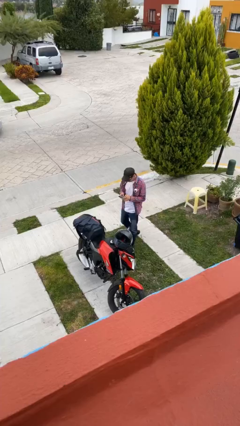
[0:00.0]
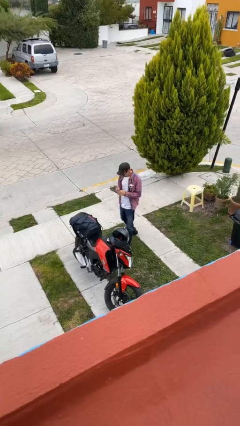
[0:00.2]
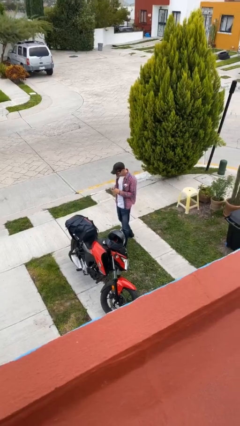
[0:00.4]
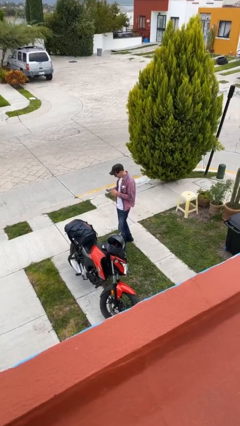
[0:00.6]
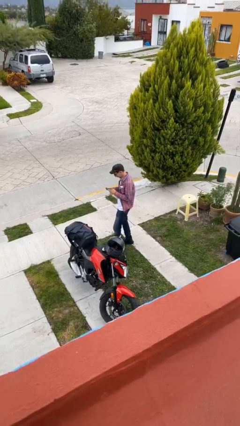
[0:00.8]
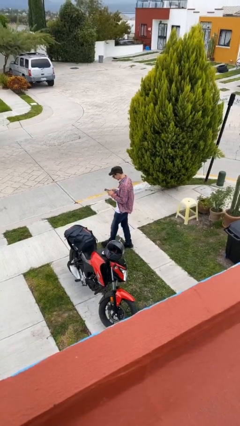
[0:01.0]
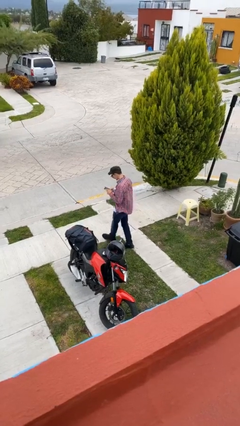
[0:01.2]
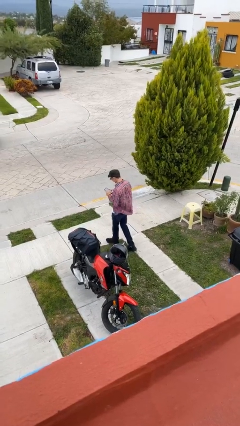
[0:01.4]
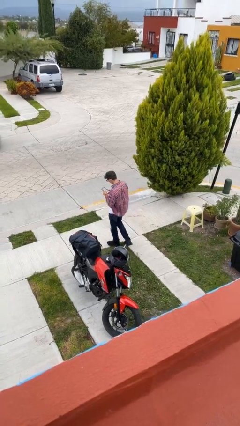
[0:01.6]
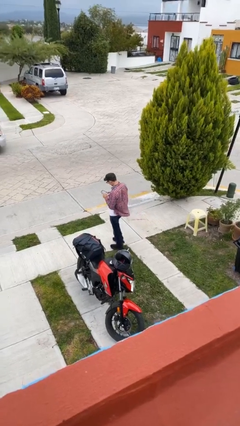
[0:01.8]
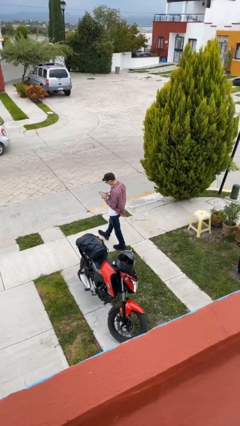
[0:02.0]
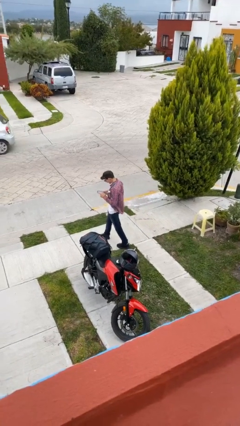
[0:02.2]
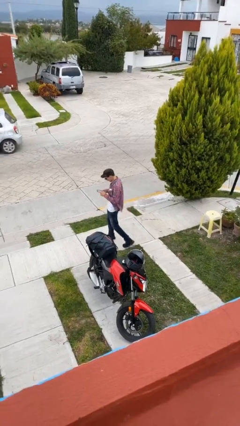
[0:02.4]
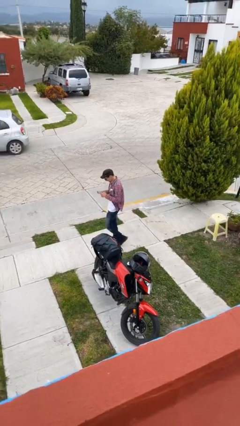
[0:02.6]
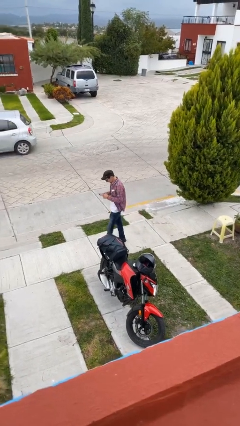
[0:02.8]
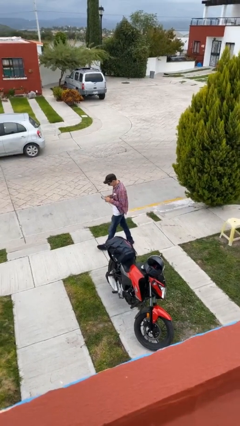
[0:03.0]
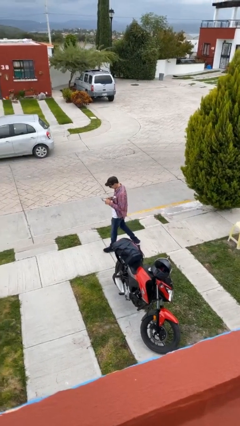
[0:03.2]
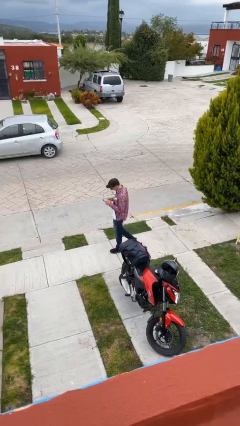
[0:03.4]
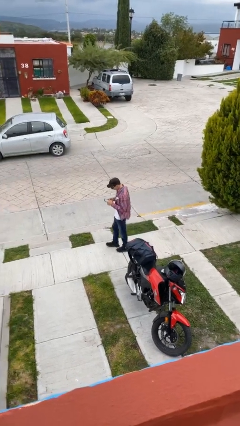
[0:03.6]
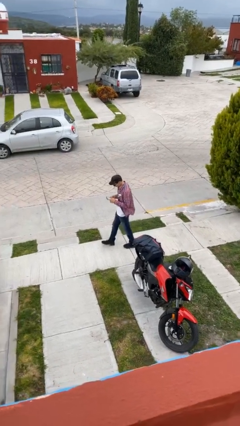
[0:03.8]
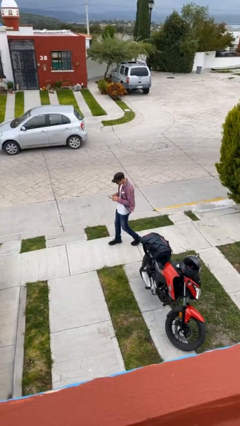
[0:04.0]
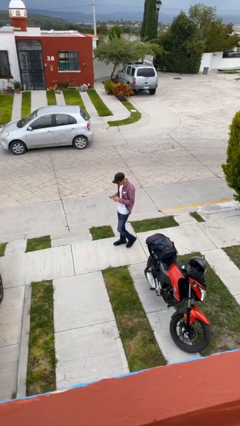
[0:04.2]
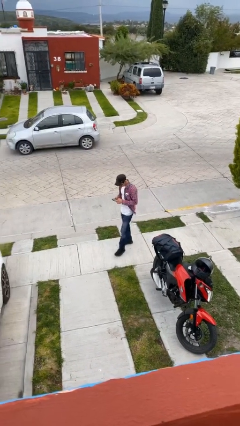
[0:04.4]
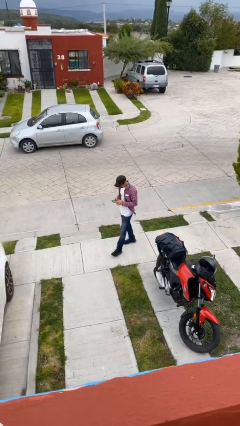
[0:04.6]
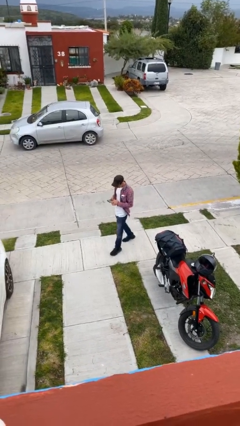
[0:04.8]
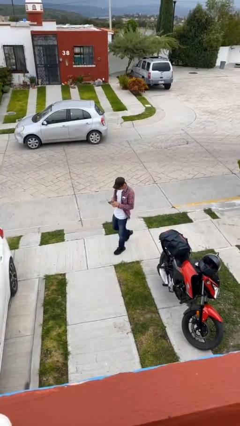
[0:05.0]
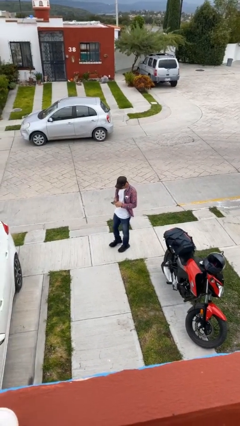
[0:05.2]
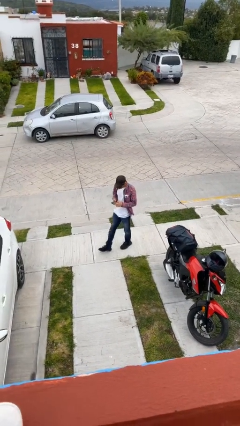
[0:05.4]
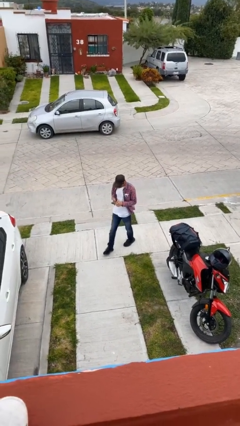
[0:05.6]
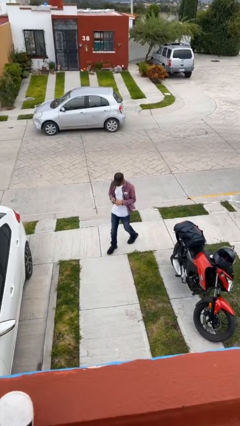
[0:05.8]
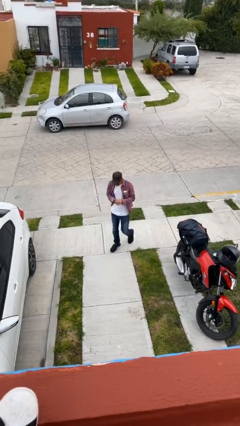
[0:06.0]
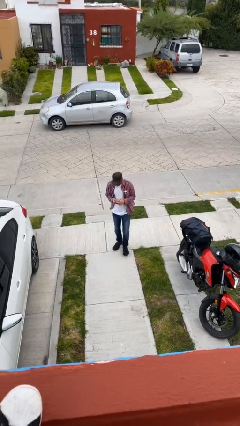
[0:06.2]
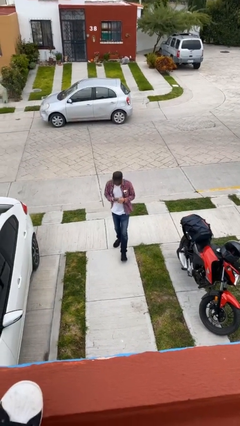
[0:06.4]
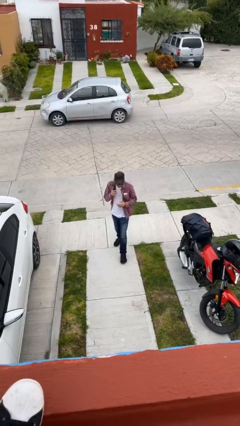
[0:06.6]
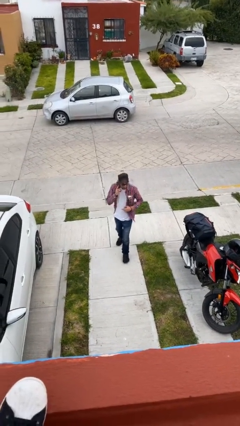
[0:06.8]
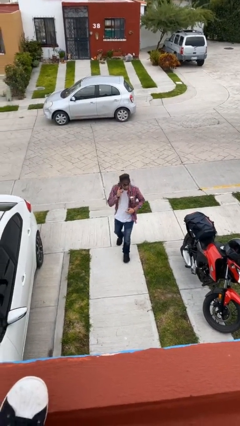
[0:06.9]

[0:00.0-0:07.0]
person texts on phone

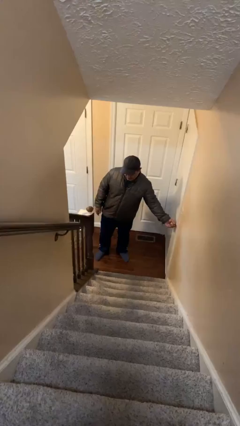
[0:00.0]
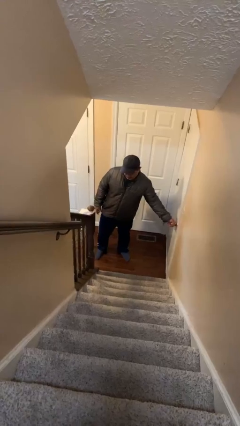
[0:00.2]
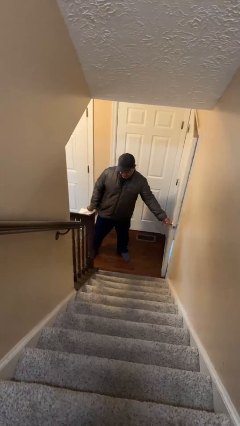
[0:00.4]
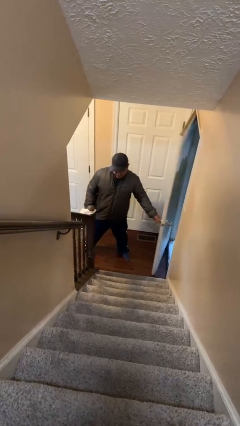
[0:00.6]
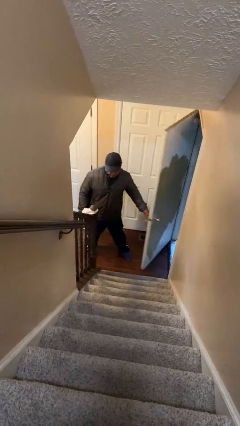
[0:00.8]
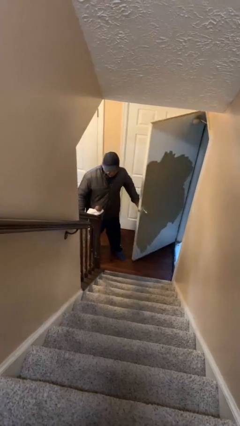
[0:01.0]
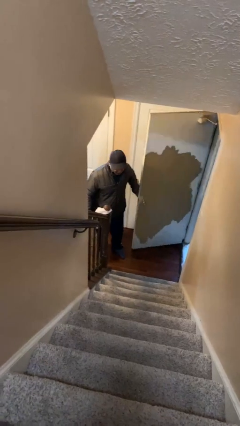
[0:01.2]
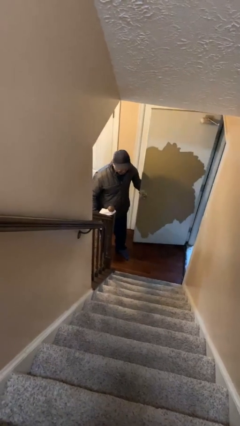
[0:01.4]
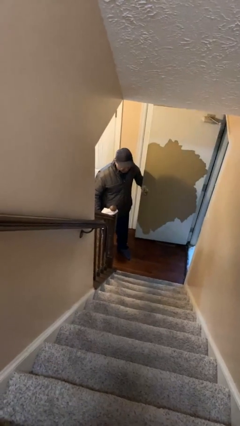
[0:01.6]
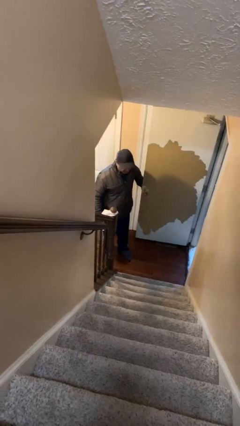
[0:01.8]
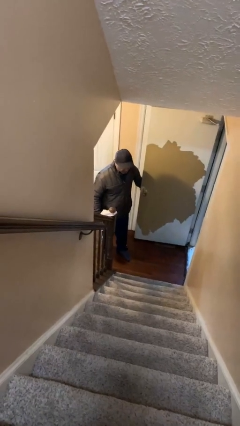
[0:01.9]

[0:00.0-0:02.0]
person opens facility door

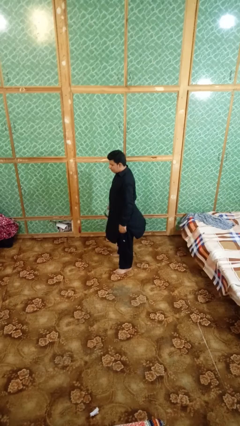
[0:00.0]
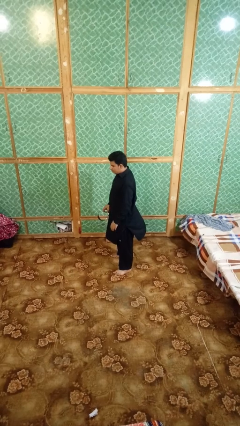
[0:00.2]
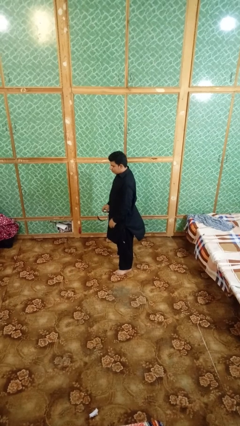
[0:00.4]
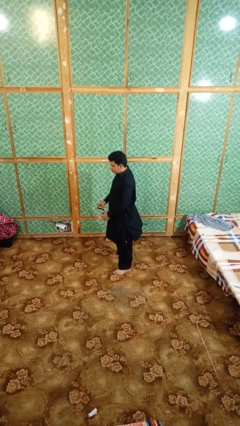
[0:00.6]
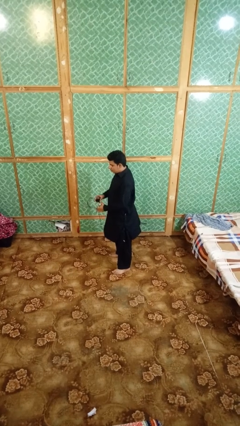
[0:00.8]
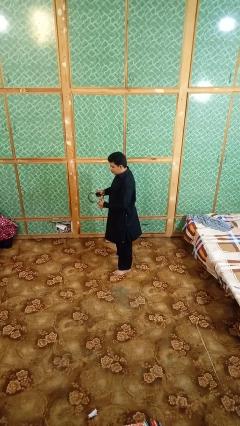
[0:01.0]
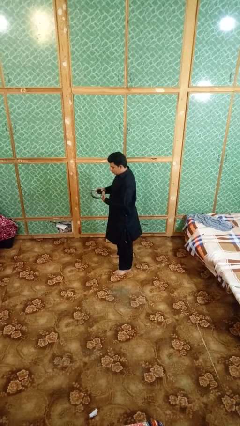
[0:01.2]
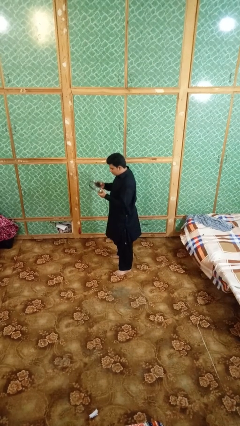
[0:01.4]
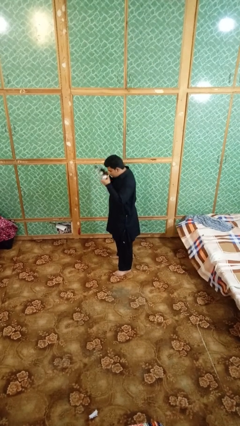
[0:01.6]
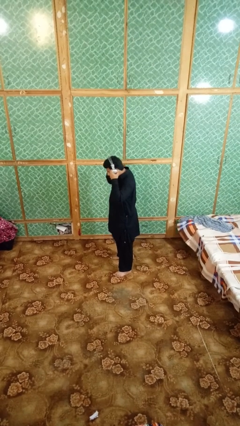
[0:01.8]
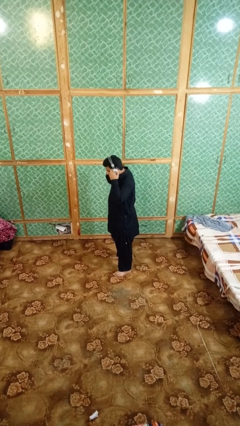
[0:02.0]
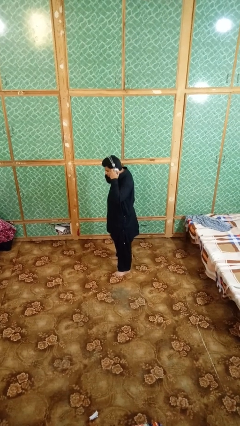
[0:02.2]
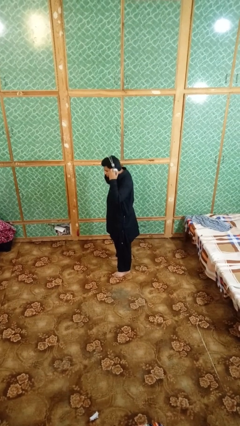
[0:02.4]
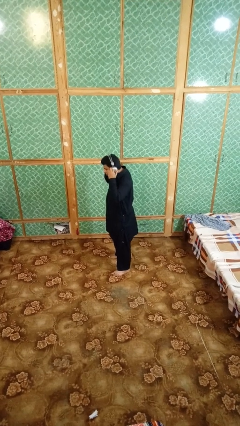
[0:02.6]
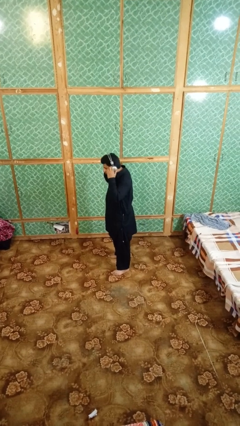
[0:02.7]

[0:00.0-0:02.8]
person puts on headphones

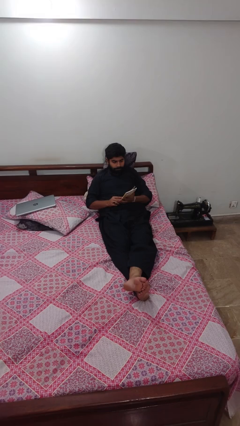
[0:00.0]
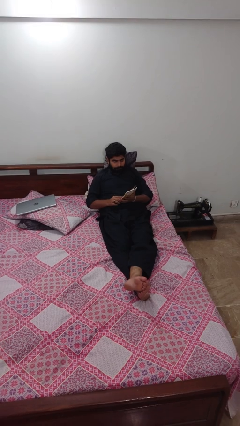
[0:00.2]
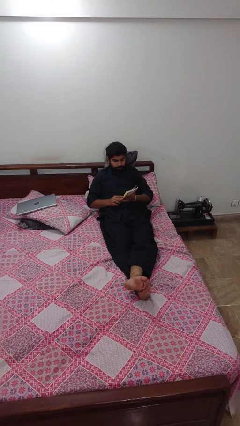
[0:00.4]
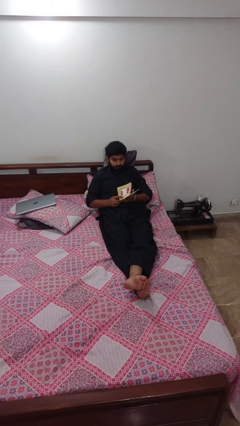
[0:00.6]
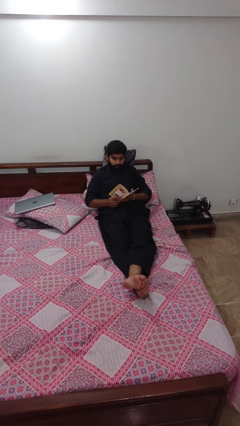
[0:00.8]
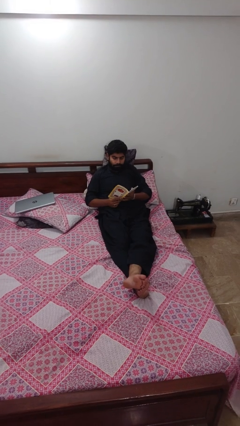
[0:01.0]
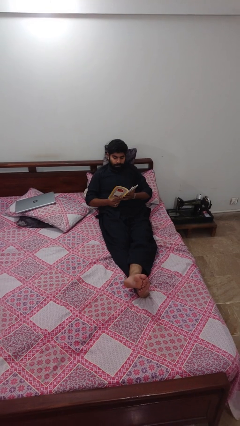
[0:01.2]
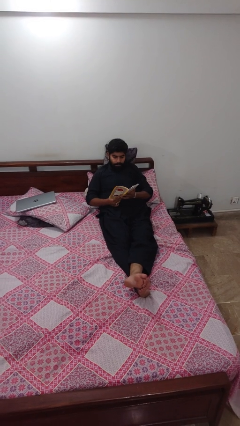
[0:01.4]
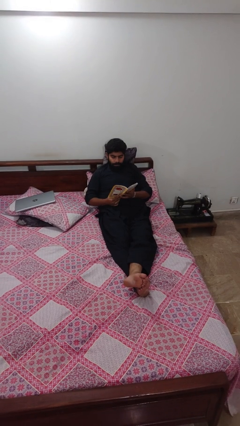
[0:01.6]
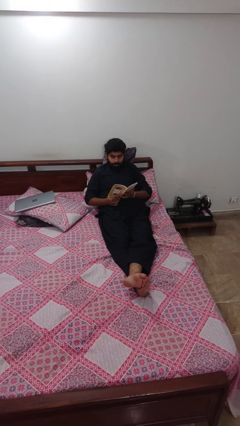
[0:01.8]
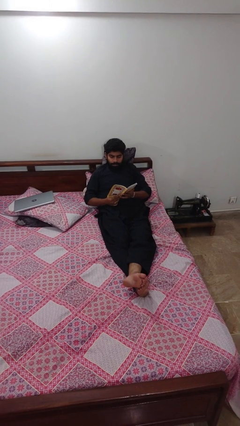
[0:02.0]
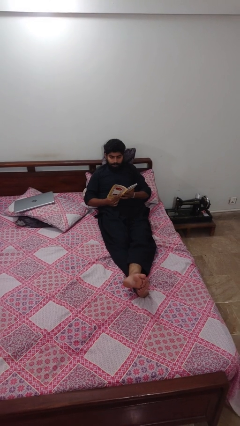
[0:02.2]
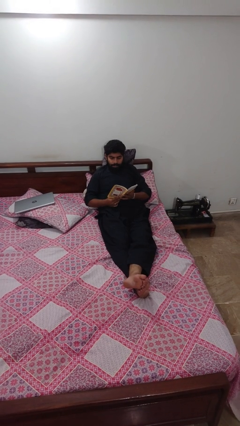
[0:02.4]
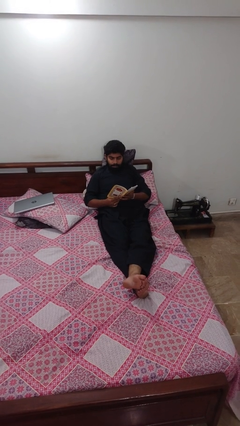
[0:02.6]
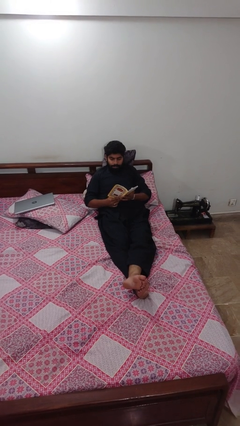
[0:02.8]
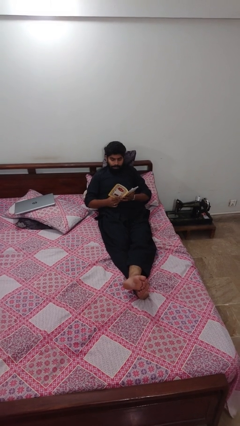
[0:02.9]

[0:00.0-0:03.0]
person reads book

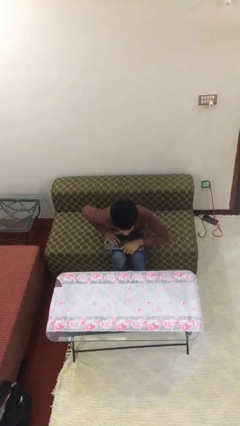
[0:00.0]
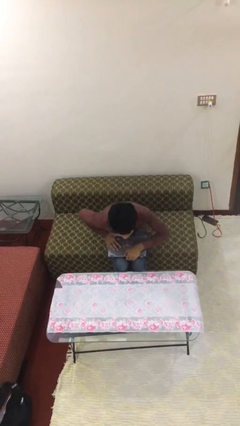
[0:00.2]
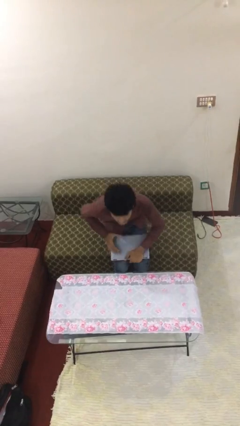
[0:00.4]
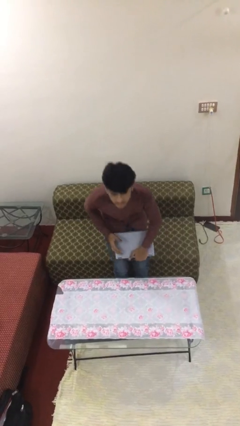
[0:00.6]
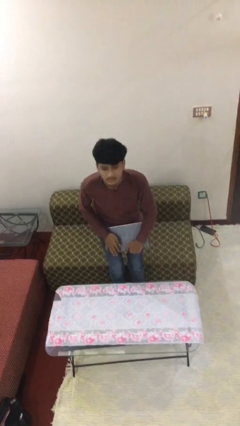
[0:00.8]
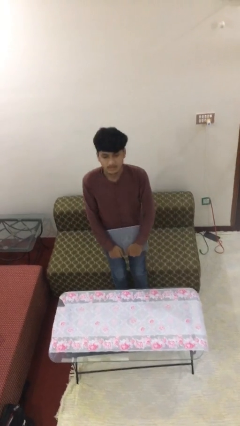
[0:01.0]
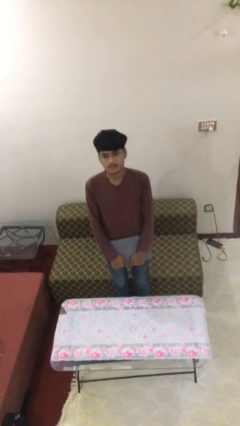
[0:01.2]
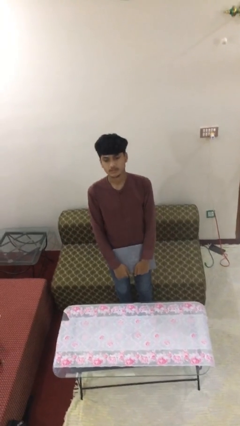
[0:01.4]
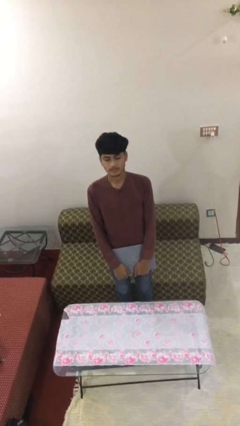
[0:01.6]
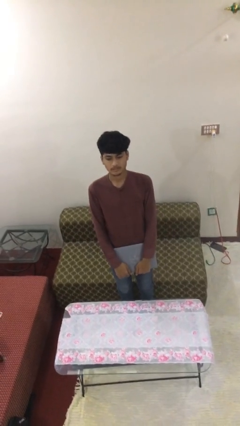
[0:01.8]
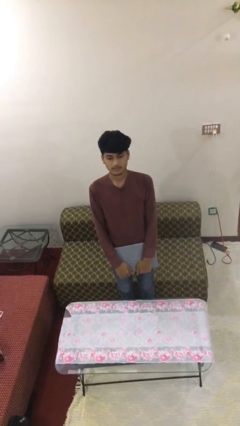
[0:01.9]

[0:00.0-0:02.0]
person stands up

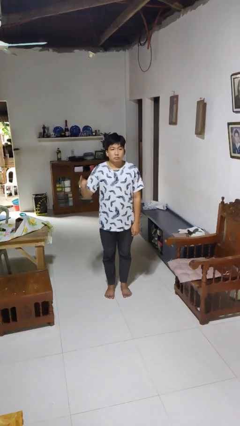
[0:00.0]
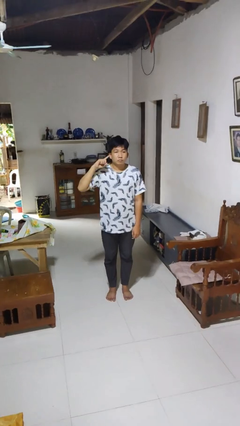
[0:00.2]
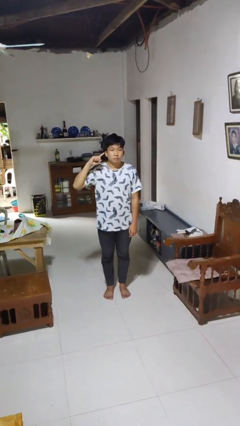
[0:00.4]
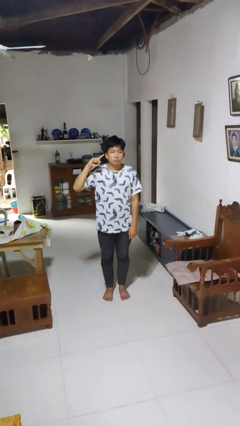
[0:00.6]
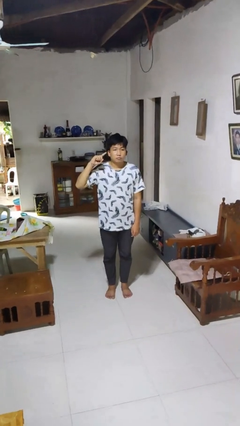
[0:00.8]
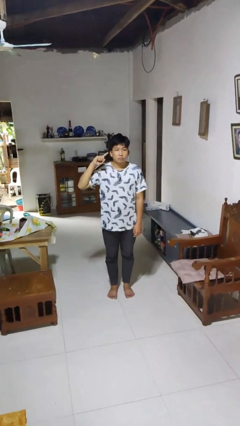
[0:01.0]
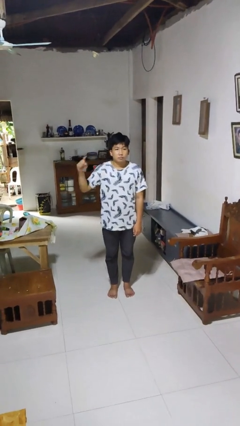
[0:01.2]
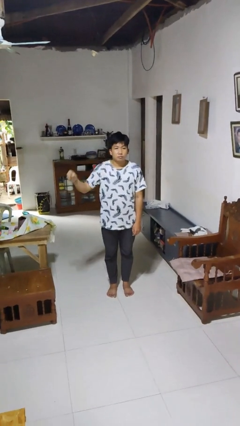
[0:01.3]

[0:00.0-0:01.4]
person gestures listen closely
